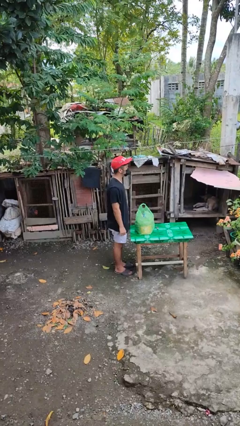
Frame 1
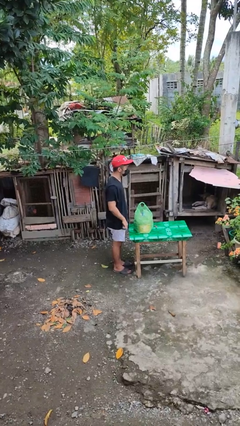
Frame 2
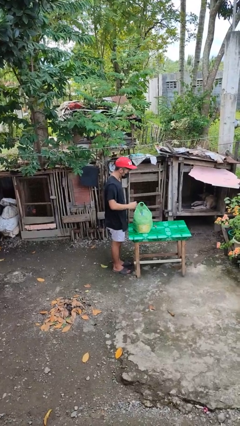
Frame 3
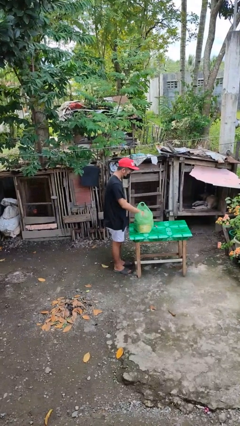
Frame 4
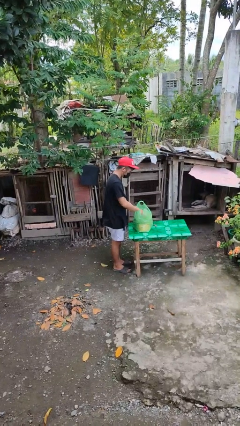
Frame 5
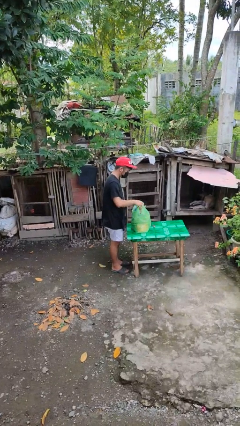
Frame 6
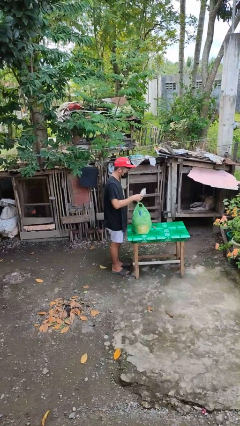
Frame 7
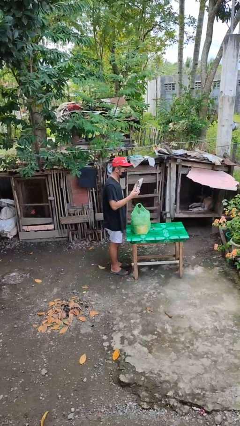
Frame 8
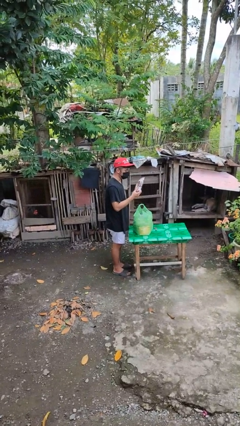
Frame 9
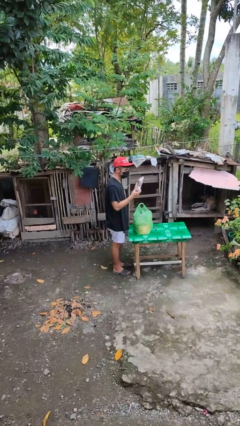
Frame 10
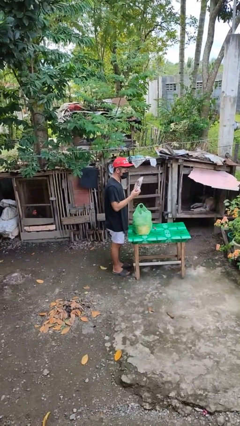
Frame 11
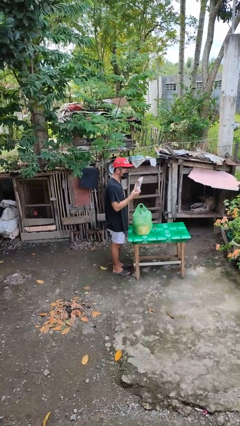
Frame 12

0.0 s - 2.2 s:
person takes object from bag

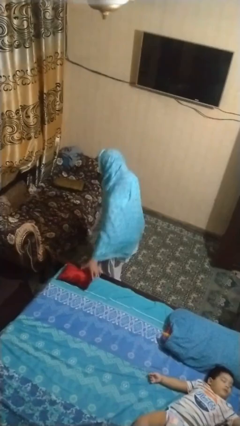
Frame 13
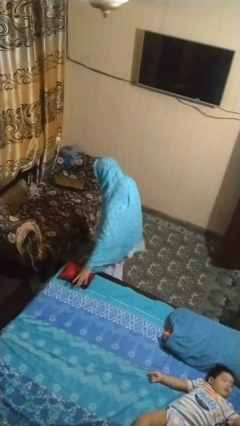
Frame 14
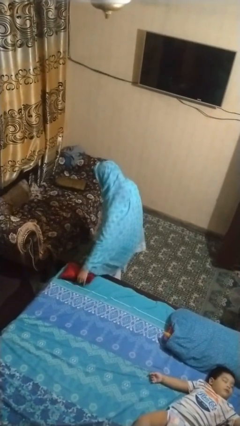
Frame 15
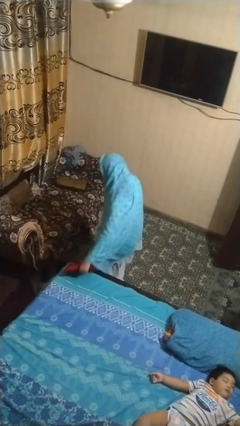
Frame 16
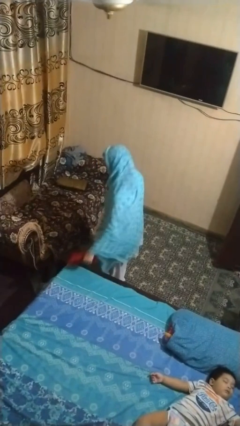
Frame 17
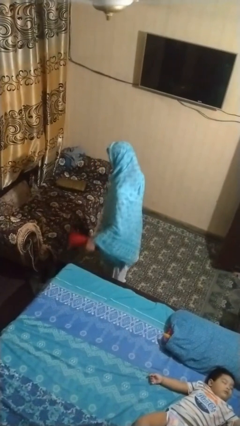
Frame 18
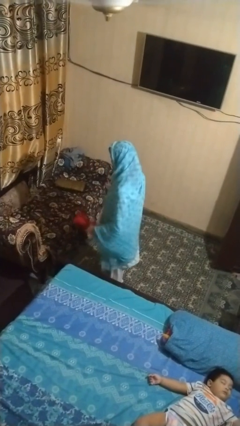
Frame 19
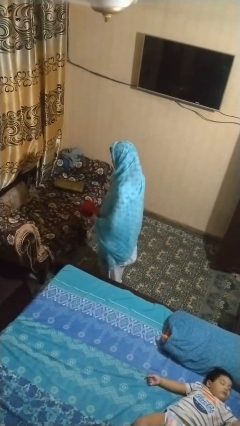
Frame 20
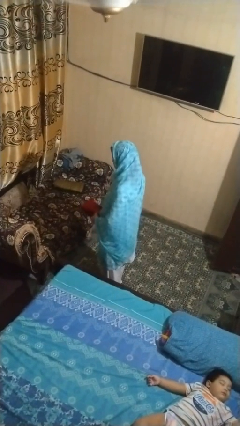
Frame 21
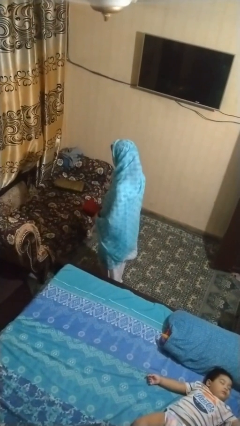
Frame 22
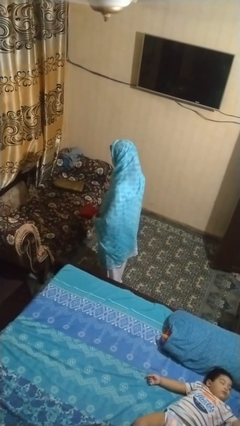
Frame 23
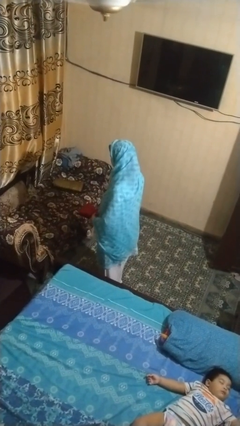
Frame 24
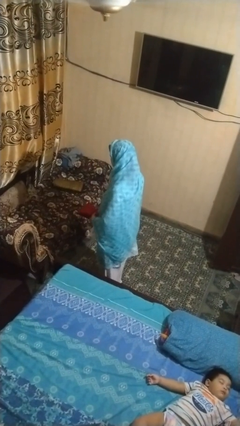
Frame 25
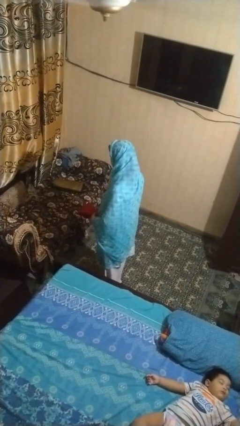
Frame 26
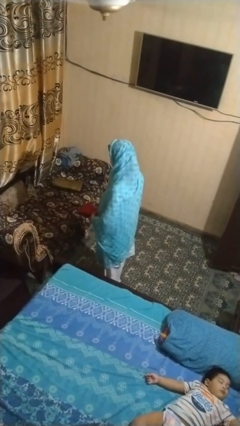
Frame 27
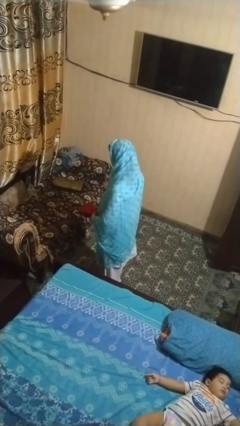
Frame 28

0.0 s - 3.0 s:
person picks up object from bed

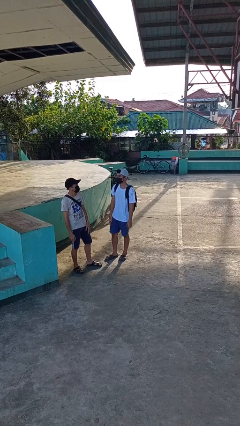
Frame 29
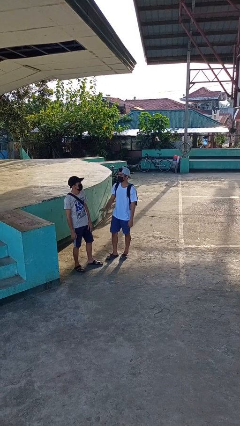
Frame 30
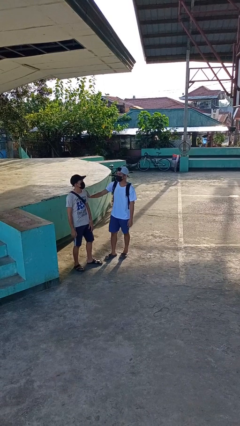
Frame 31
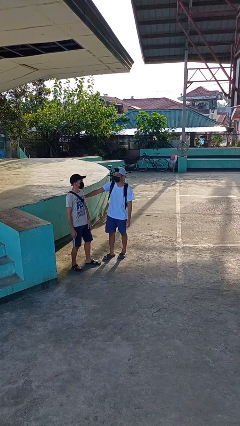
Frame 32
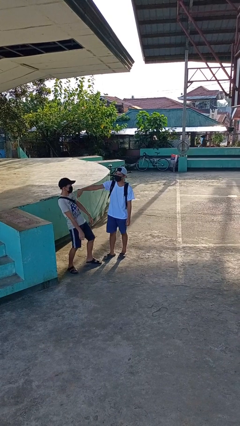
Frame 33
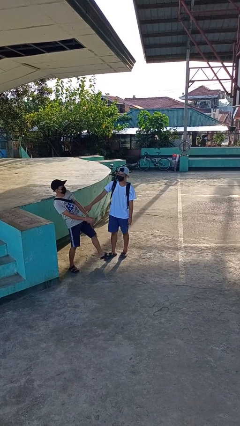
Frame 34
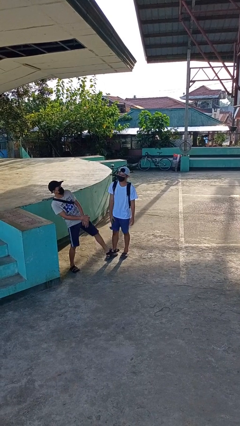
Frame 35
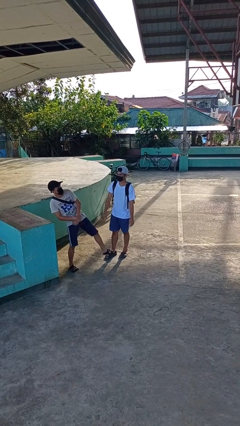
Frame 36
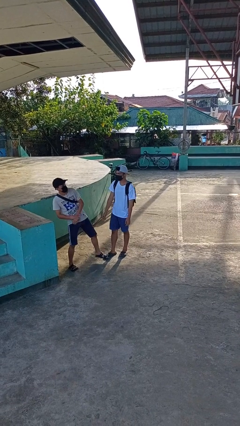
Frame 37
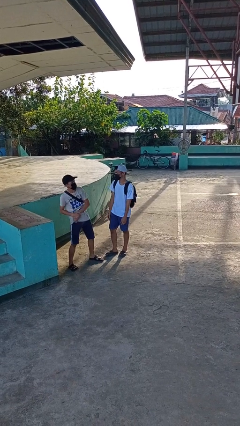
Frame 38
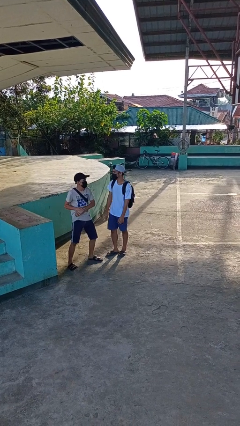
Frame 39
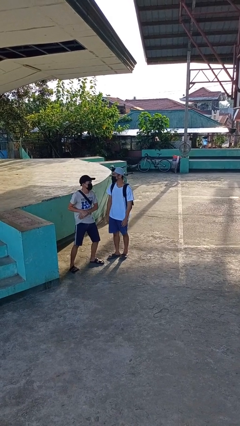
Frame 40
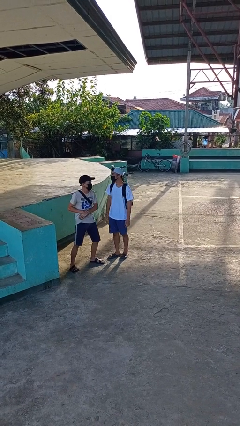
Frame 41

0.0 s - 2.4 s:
person shoves person

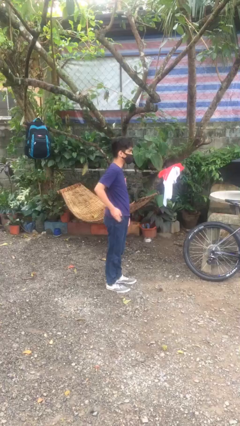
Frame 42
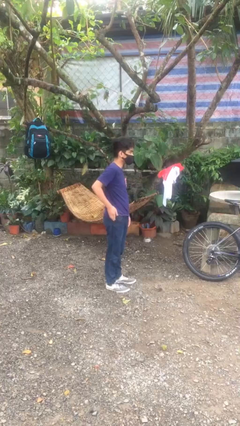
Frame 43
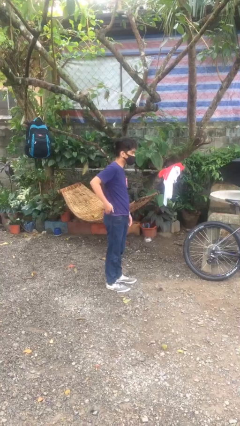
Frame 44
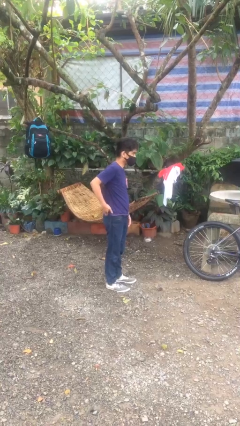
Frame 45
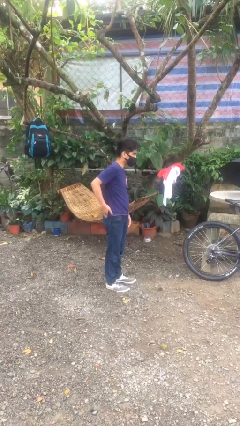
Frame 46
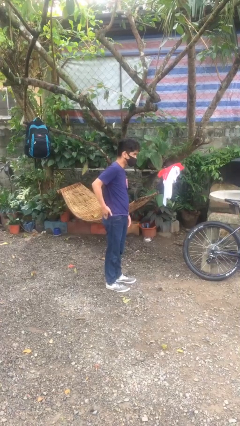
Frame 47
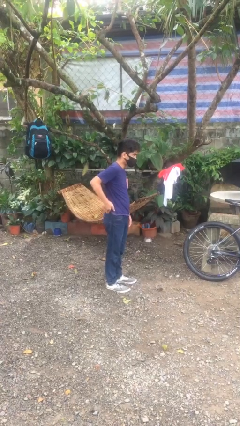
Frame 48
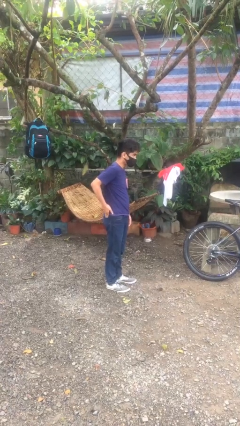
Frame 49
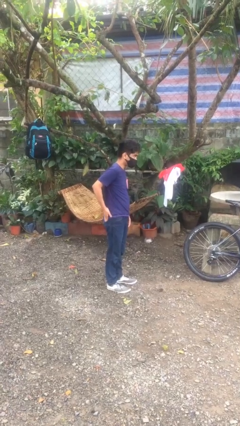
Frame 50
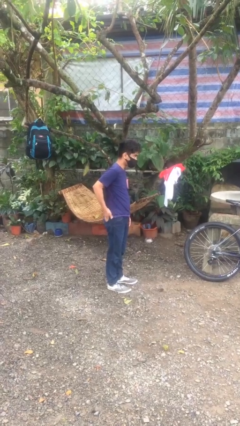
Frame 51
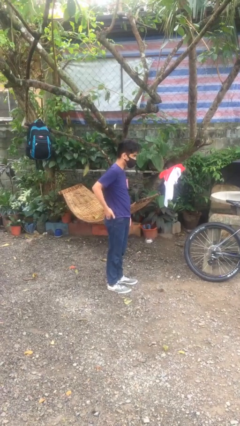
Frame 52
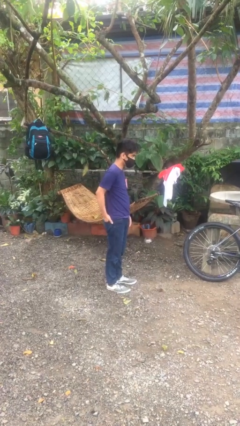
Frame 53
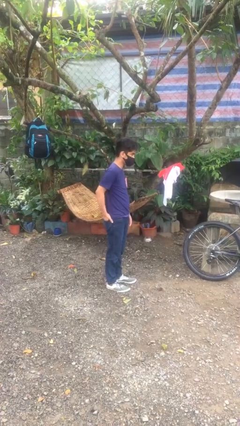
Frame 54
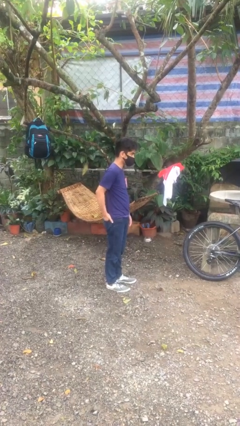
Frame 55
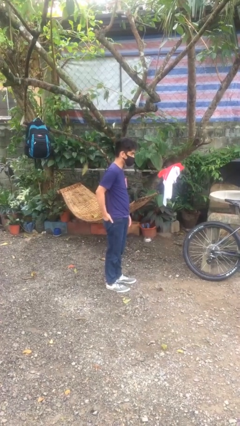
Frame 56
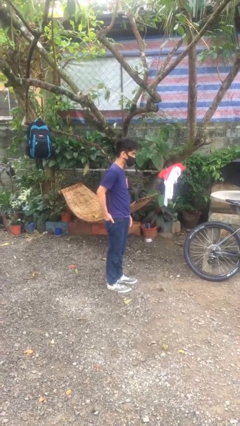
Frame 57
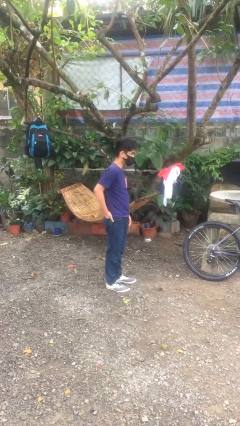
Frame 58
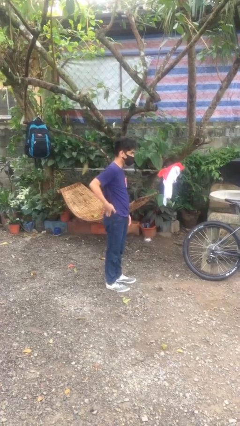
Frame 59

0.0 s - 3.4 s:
person puts hands in back pockets

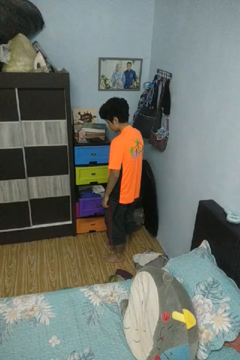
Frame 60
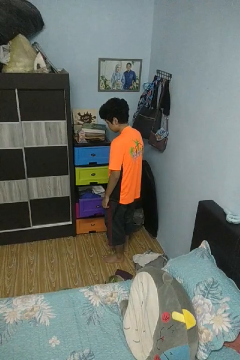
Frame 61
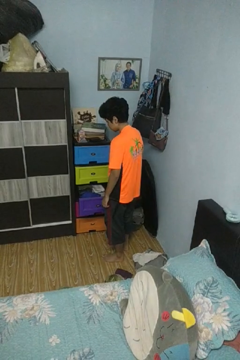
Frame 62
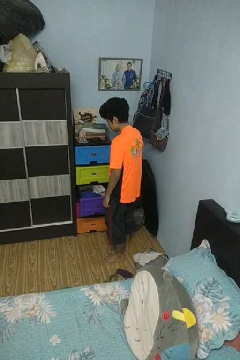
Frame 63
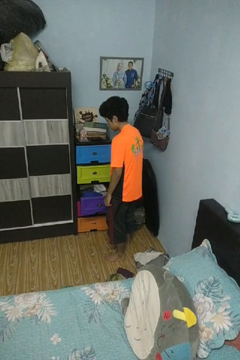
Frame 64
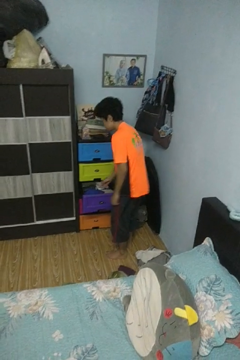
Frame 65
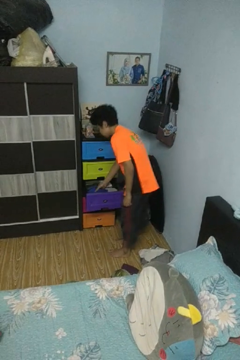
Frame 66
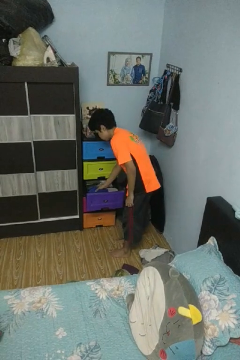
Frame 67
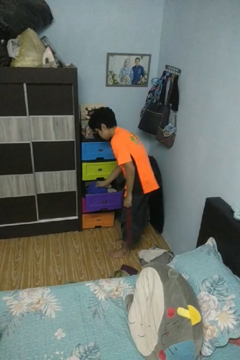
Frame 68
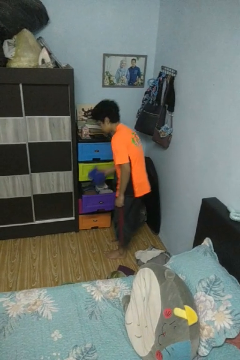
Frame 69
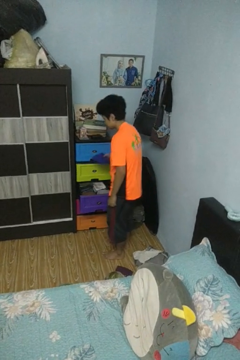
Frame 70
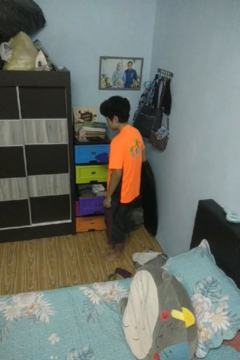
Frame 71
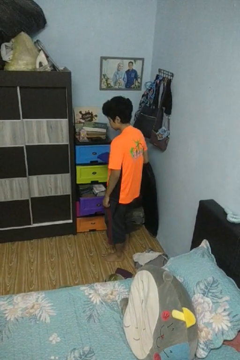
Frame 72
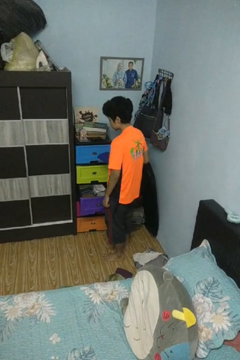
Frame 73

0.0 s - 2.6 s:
person takes clothes from dresser

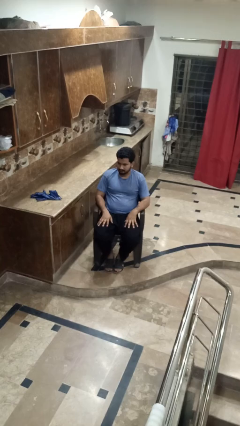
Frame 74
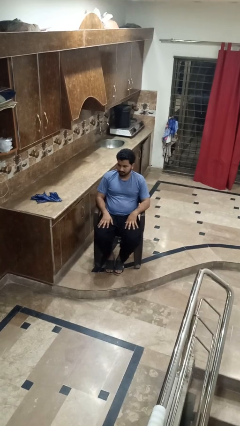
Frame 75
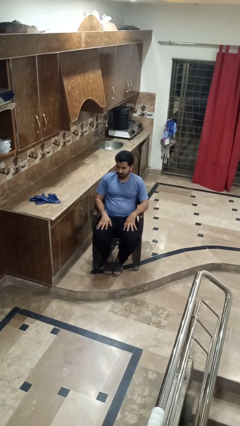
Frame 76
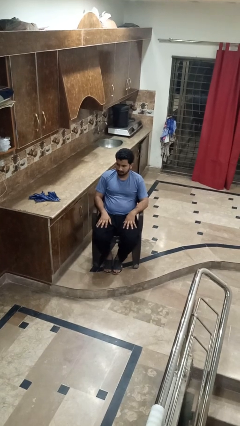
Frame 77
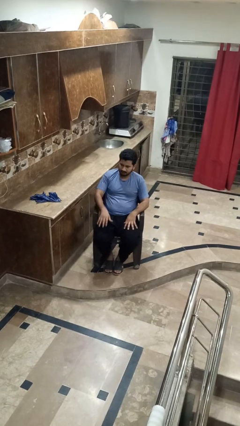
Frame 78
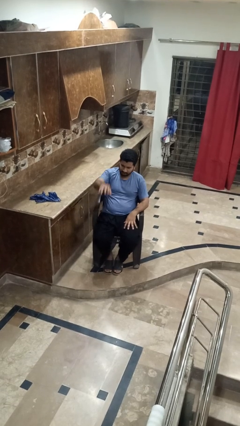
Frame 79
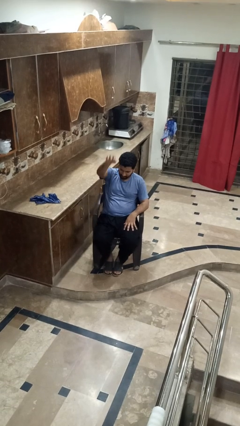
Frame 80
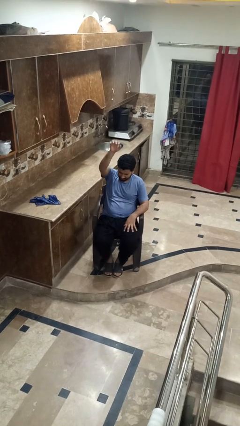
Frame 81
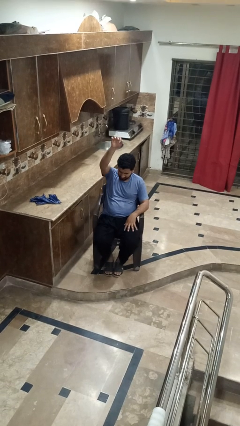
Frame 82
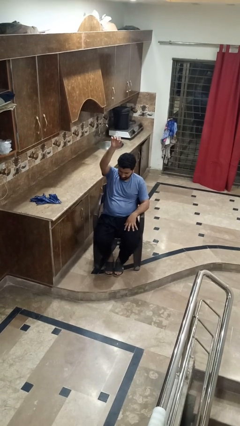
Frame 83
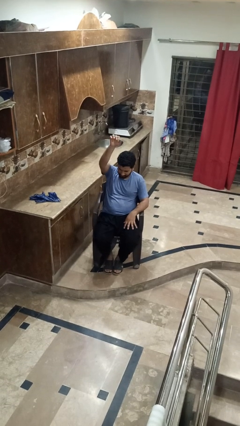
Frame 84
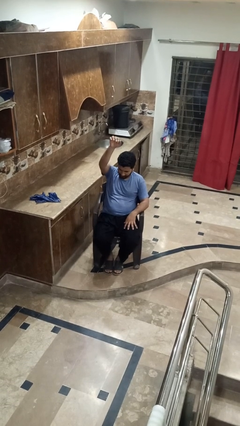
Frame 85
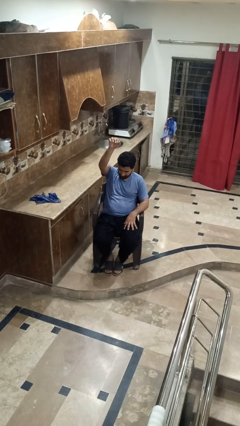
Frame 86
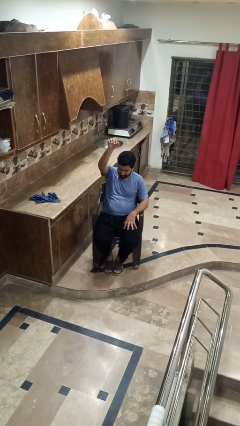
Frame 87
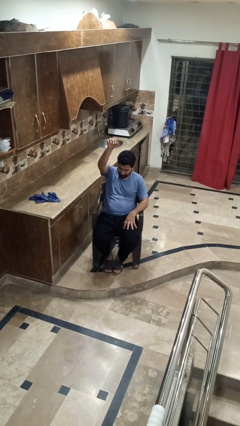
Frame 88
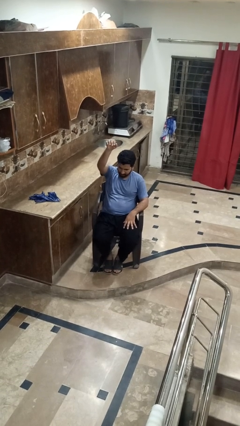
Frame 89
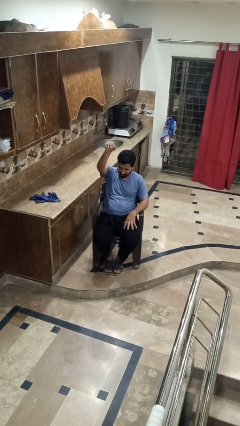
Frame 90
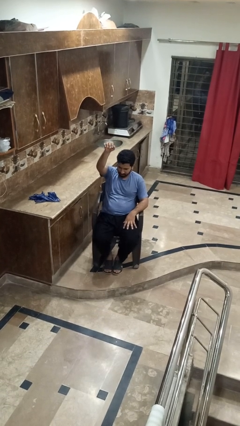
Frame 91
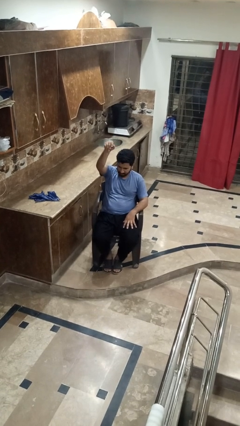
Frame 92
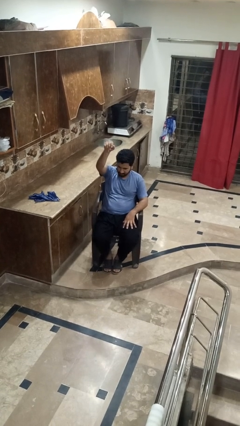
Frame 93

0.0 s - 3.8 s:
person gestures raise hand
